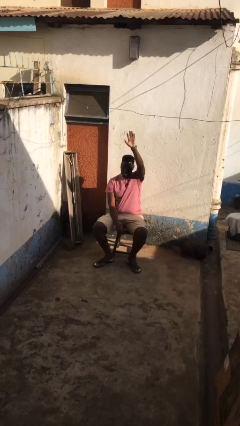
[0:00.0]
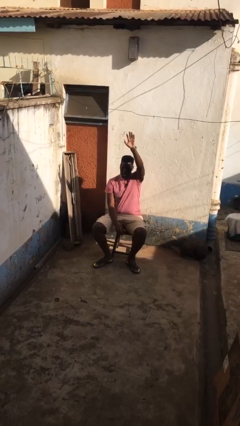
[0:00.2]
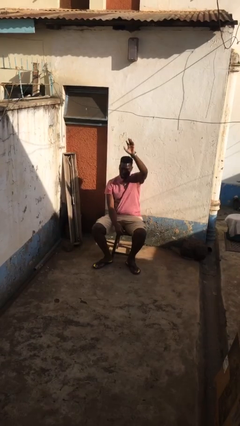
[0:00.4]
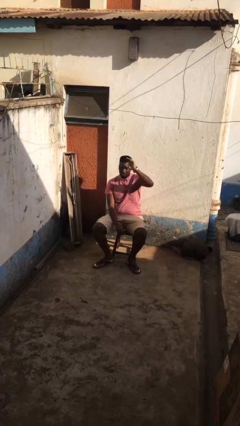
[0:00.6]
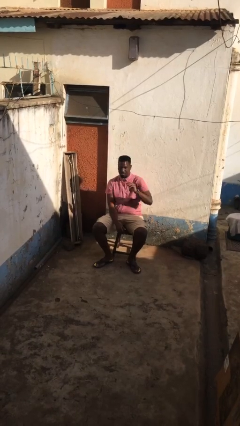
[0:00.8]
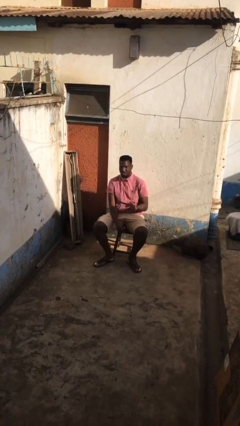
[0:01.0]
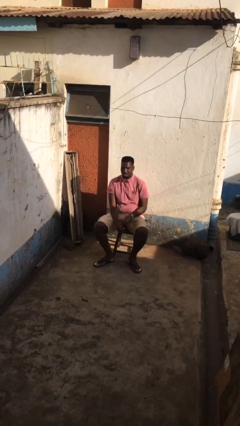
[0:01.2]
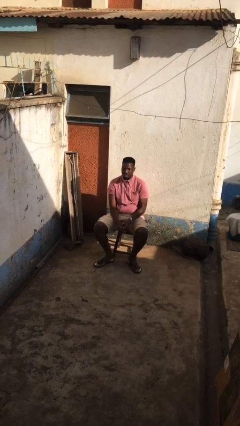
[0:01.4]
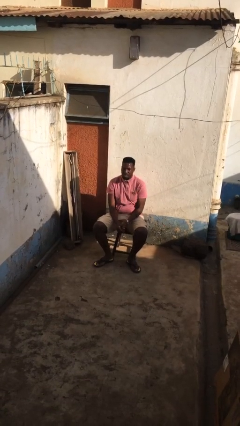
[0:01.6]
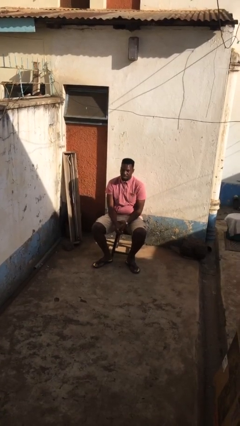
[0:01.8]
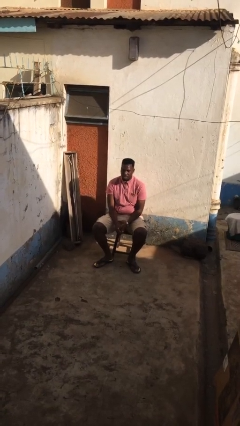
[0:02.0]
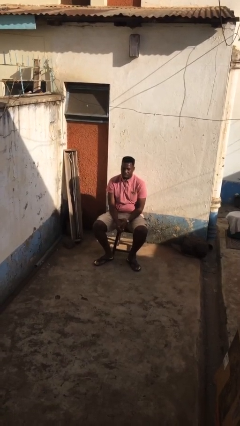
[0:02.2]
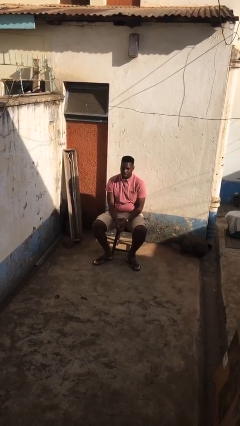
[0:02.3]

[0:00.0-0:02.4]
person gestures lower hand

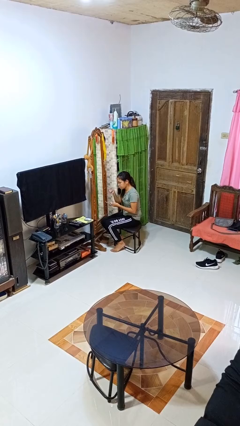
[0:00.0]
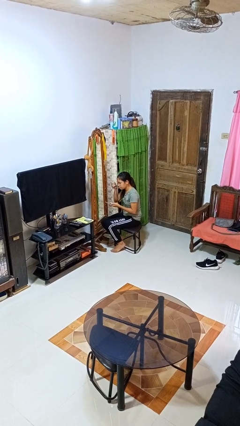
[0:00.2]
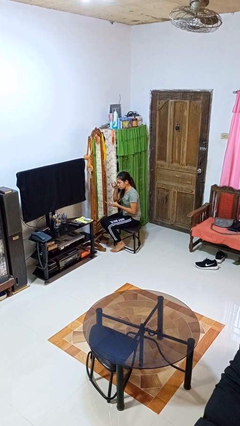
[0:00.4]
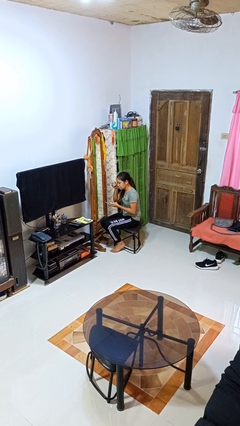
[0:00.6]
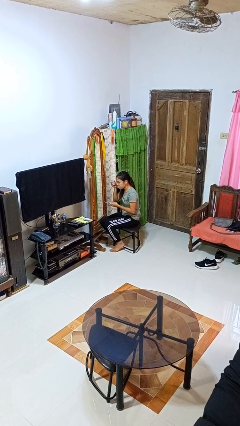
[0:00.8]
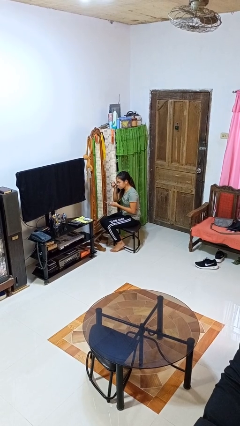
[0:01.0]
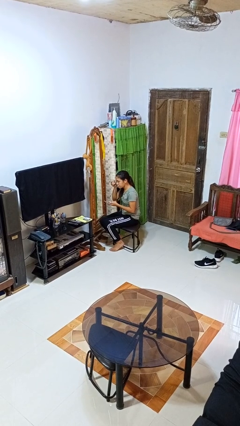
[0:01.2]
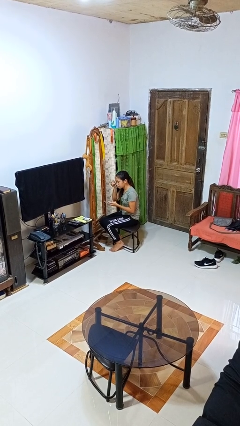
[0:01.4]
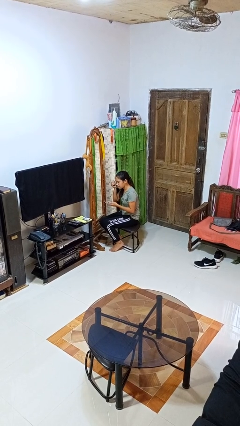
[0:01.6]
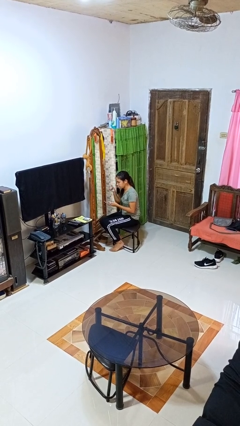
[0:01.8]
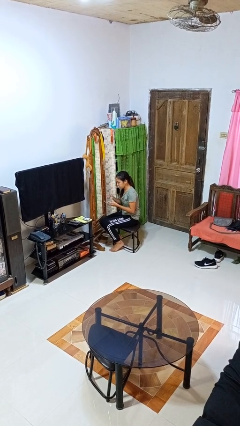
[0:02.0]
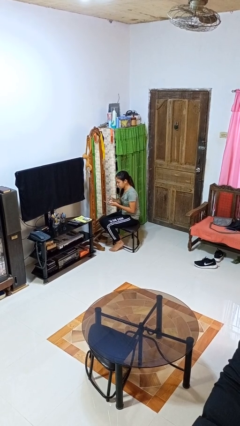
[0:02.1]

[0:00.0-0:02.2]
person applies eye makeup

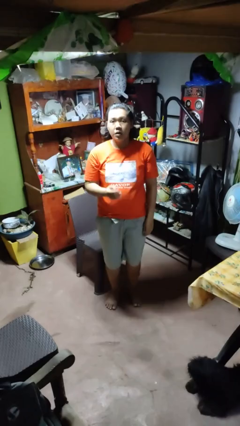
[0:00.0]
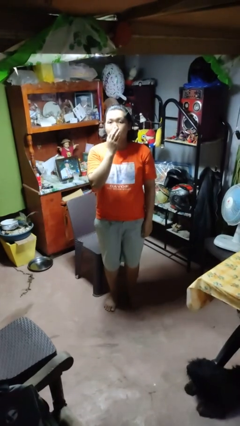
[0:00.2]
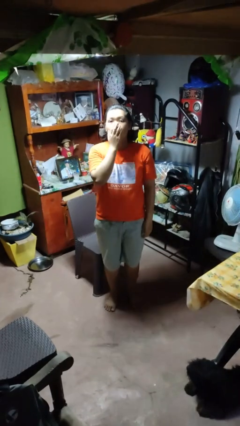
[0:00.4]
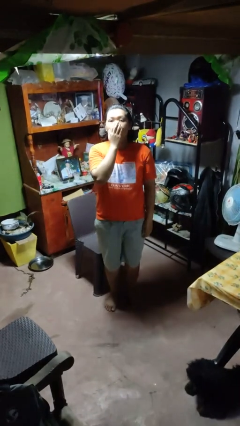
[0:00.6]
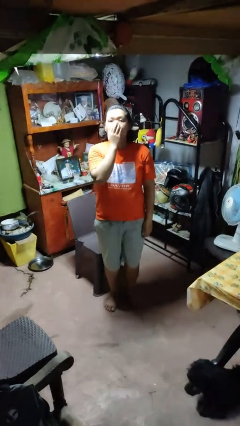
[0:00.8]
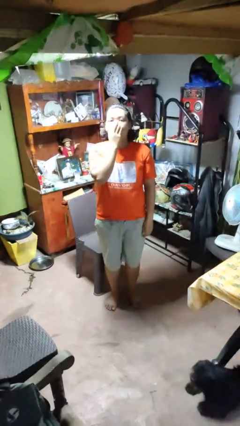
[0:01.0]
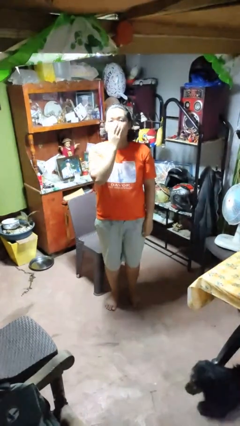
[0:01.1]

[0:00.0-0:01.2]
person yawns

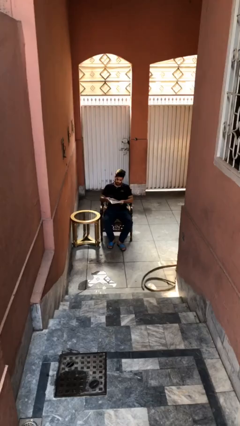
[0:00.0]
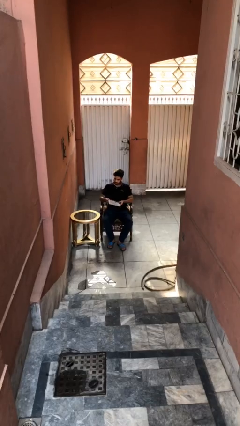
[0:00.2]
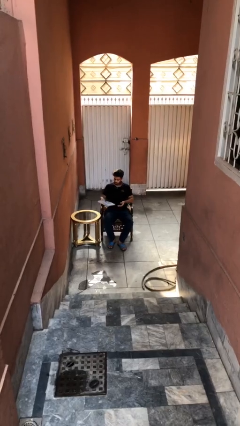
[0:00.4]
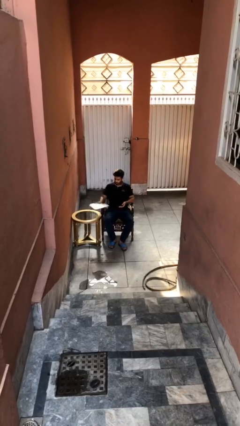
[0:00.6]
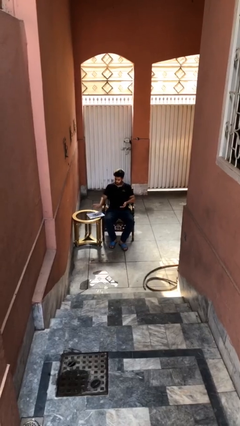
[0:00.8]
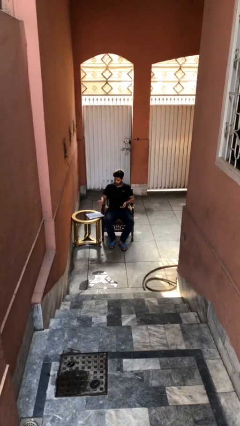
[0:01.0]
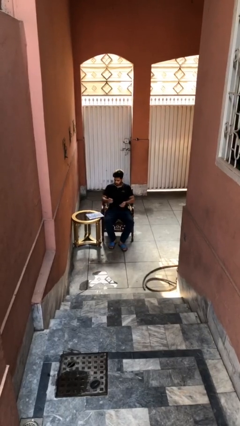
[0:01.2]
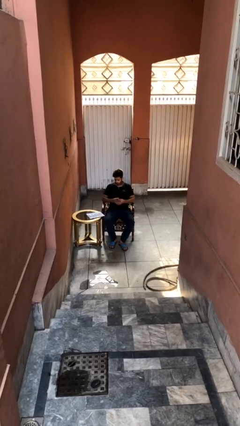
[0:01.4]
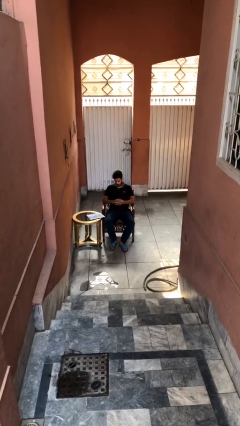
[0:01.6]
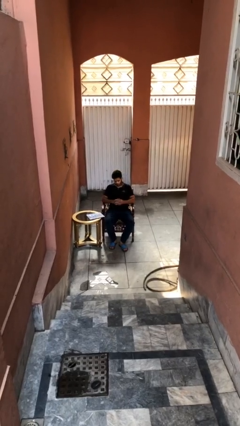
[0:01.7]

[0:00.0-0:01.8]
person puts down object on table

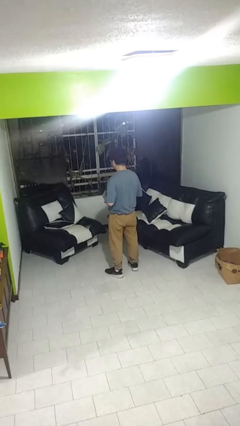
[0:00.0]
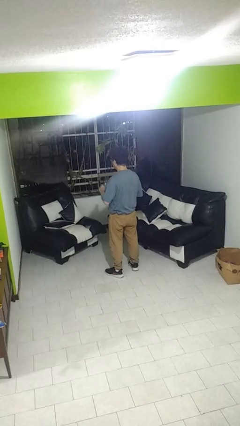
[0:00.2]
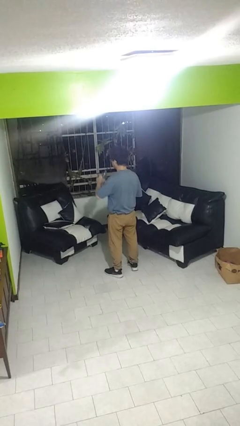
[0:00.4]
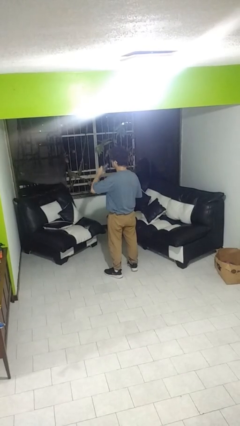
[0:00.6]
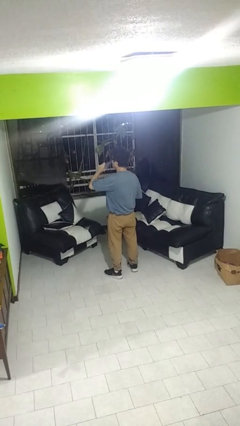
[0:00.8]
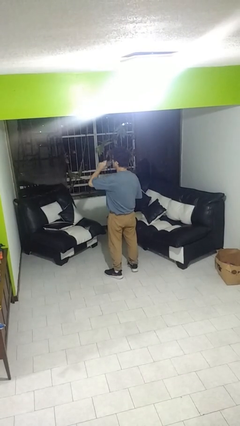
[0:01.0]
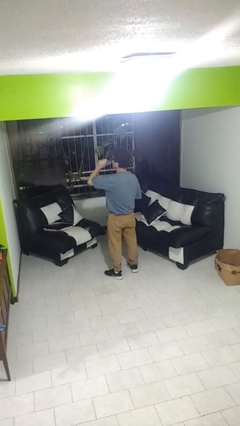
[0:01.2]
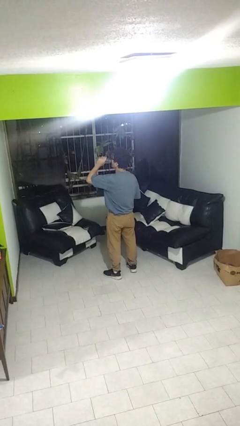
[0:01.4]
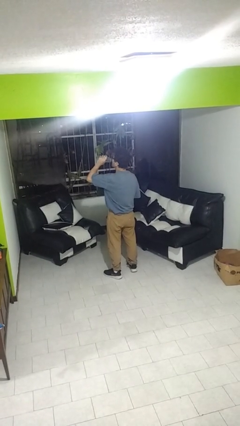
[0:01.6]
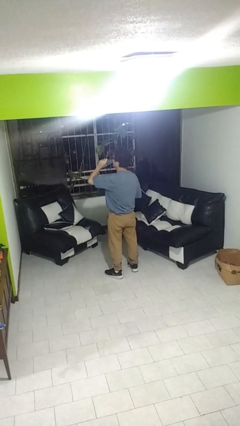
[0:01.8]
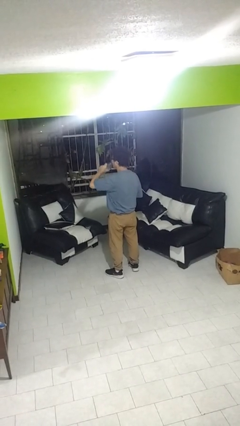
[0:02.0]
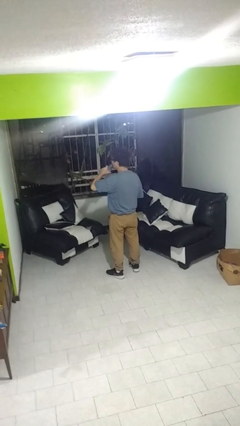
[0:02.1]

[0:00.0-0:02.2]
person drinks from bottle

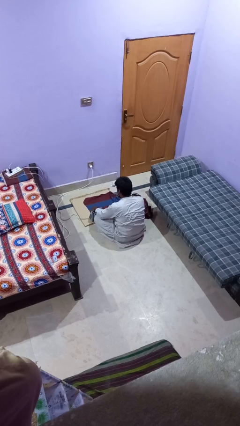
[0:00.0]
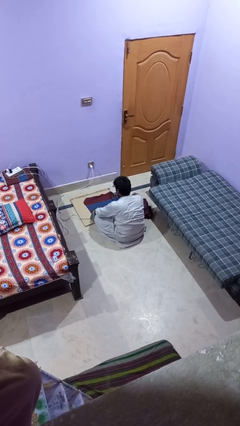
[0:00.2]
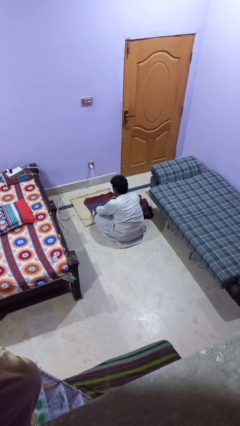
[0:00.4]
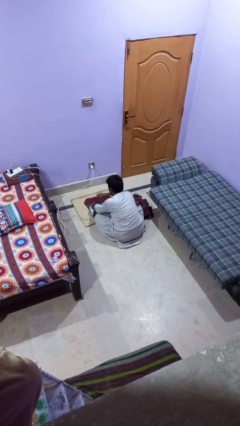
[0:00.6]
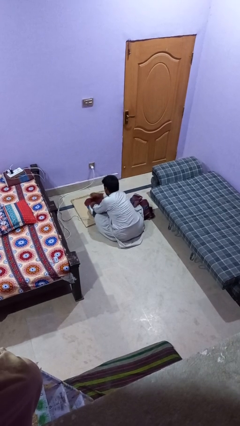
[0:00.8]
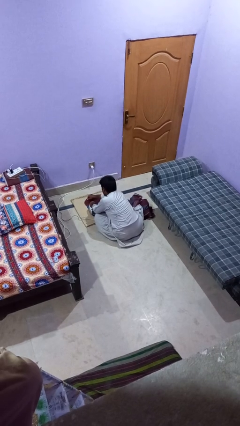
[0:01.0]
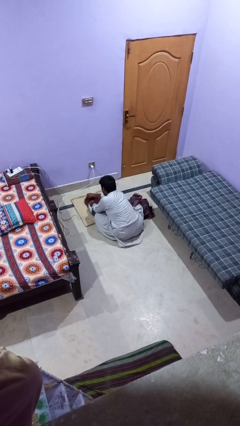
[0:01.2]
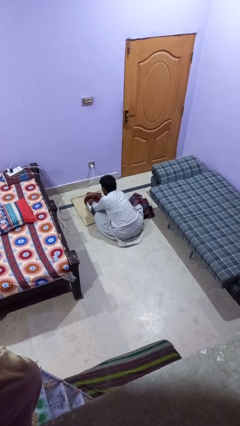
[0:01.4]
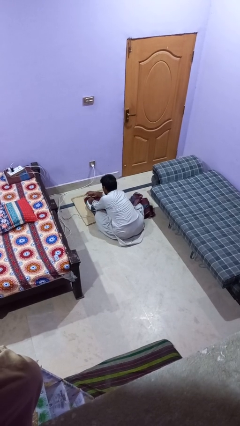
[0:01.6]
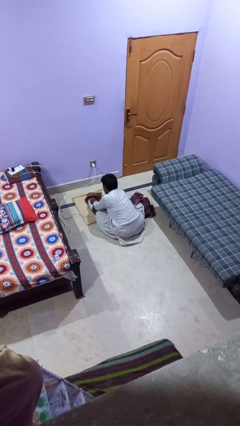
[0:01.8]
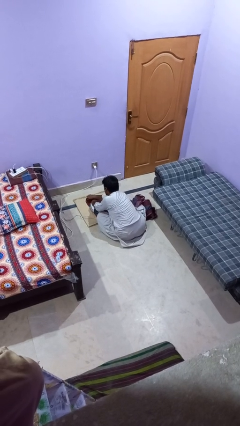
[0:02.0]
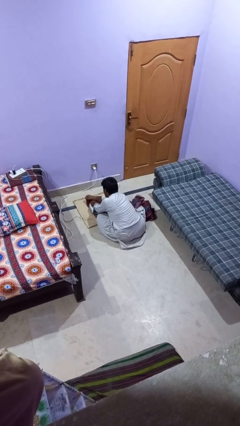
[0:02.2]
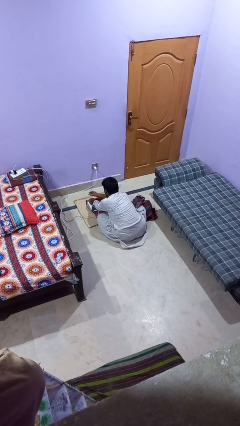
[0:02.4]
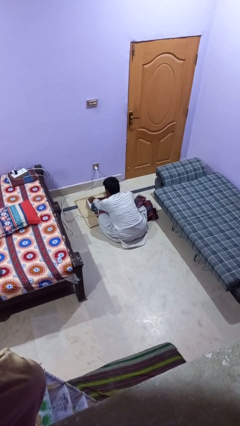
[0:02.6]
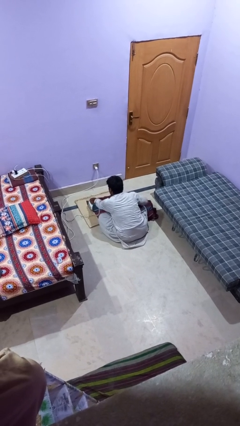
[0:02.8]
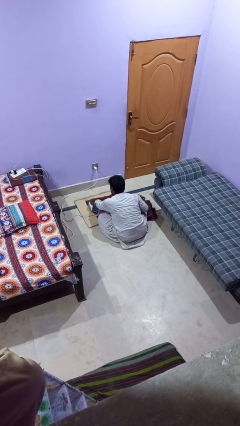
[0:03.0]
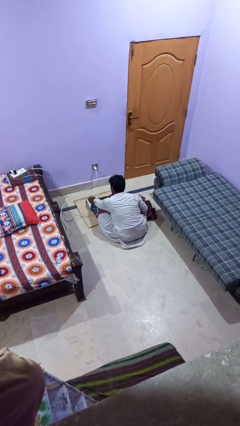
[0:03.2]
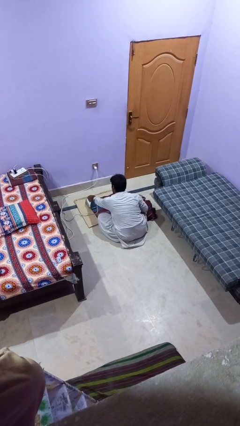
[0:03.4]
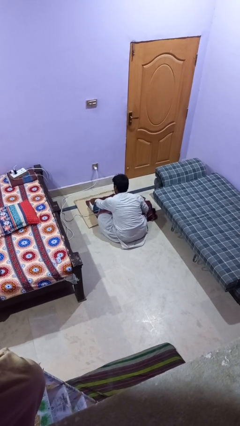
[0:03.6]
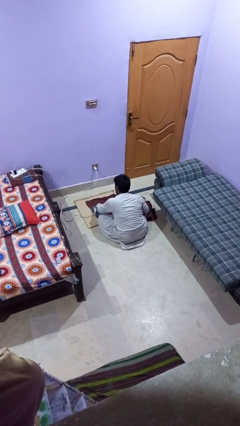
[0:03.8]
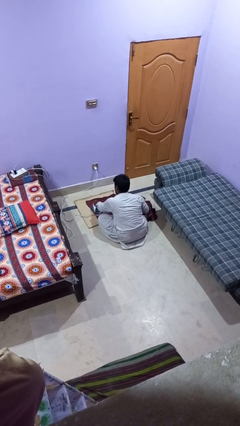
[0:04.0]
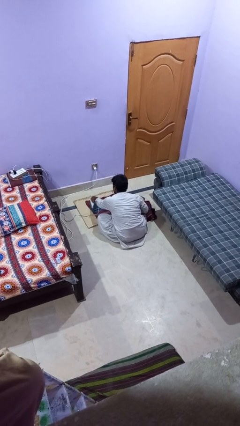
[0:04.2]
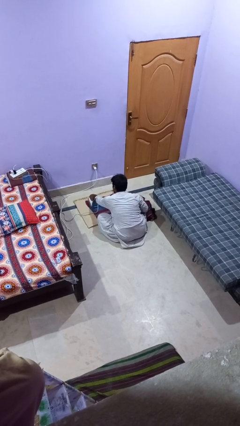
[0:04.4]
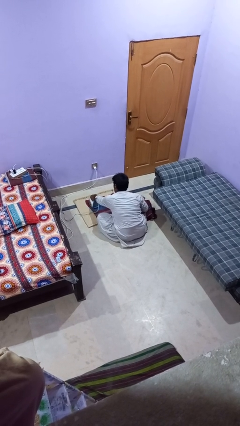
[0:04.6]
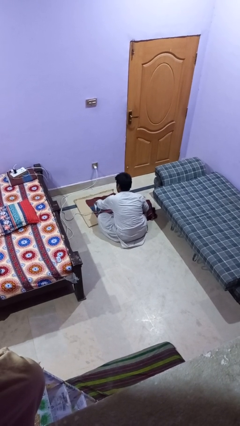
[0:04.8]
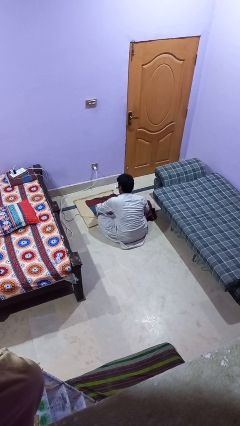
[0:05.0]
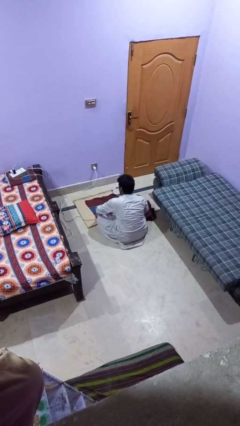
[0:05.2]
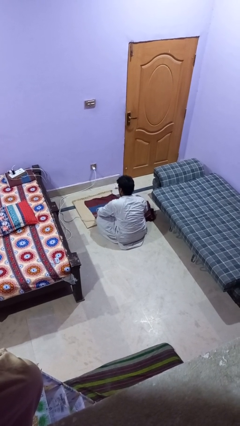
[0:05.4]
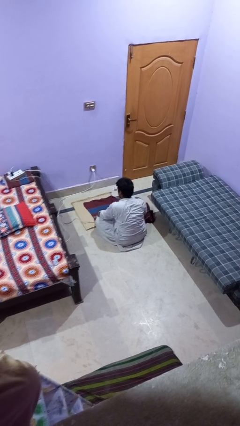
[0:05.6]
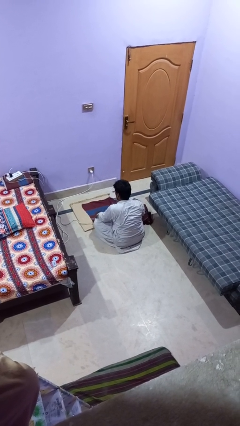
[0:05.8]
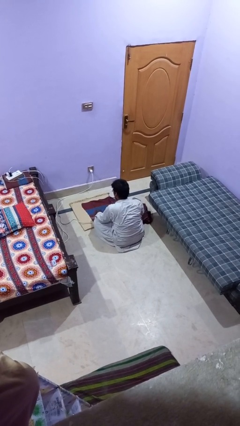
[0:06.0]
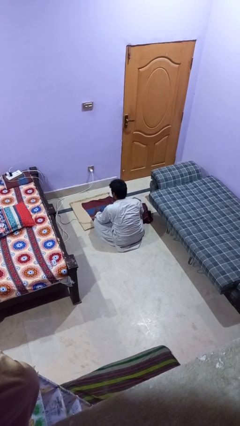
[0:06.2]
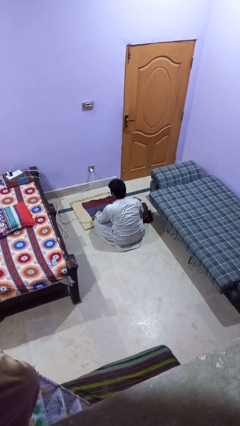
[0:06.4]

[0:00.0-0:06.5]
person irons clothes

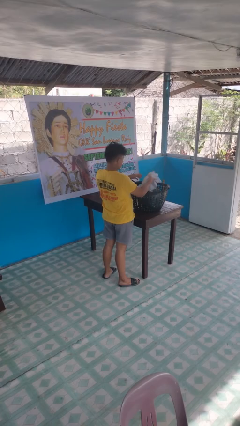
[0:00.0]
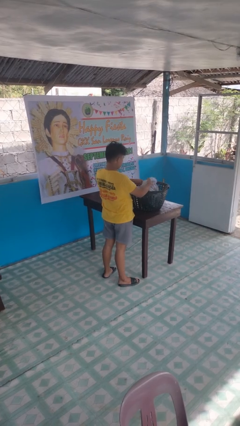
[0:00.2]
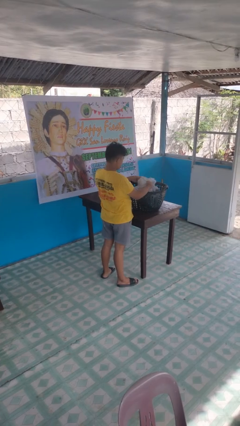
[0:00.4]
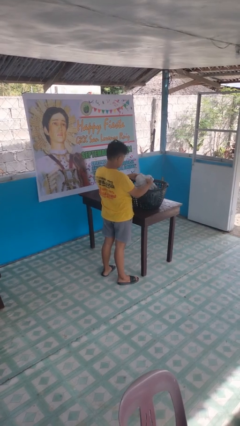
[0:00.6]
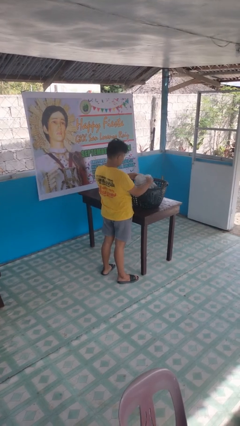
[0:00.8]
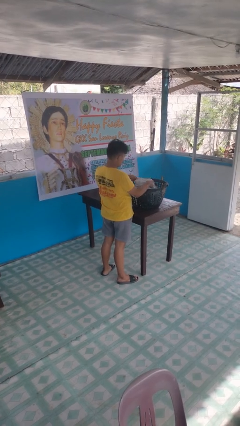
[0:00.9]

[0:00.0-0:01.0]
person puts object into basket
